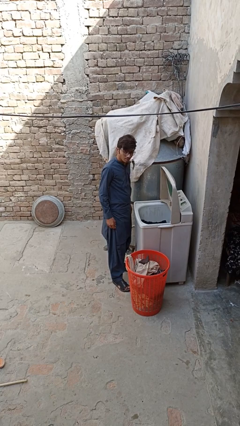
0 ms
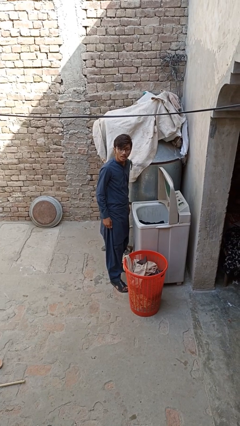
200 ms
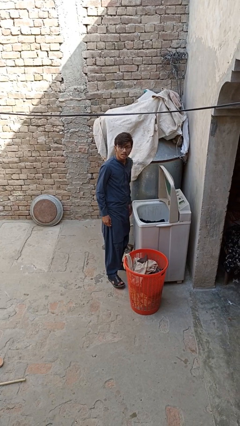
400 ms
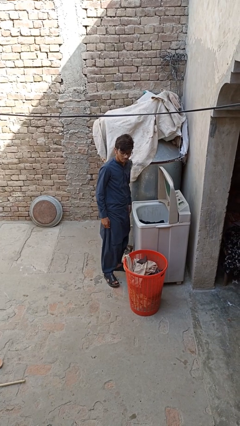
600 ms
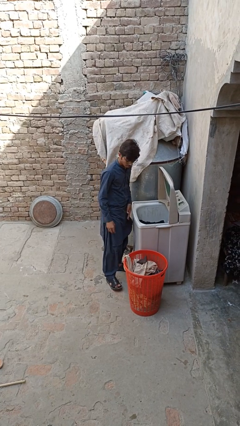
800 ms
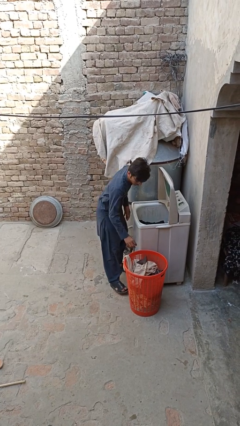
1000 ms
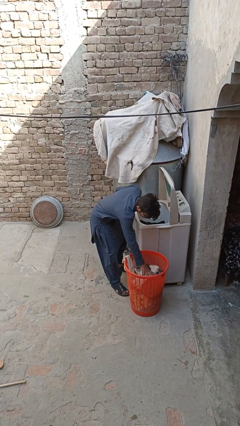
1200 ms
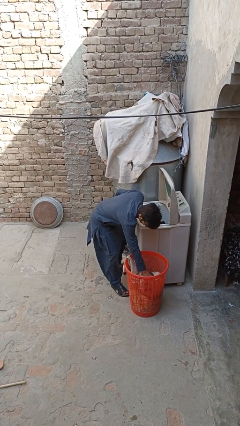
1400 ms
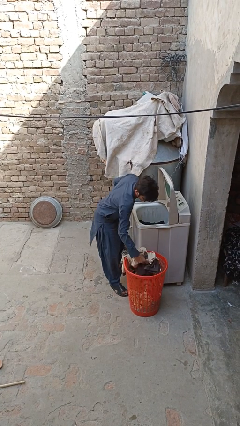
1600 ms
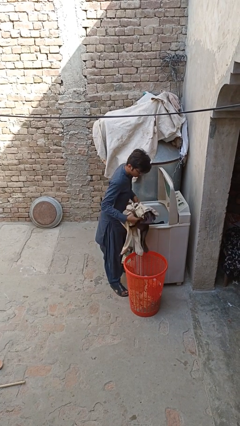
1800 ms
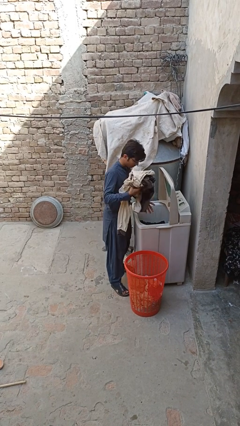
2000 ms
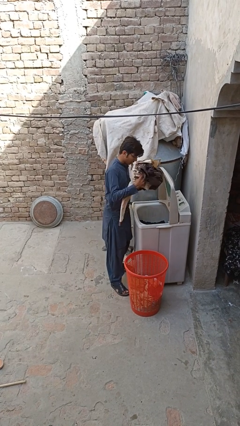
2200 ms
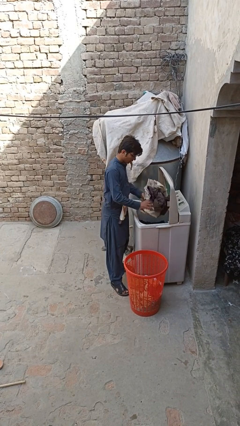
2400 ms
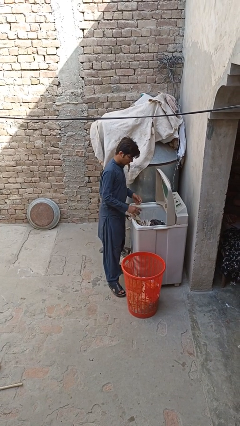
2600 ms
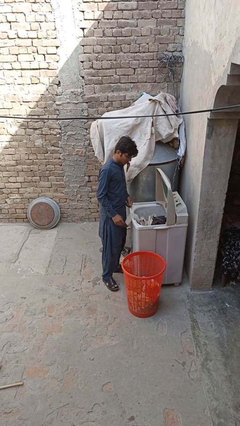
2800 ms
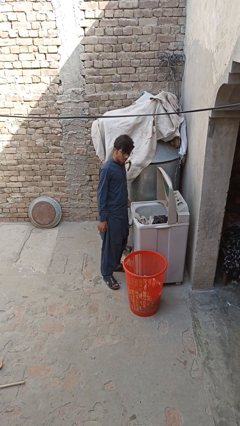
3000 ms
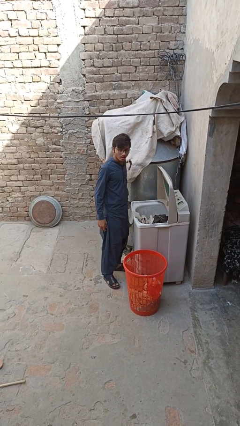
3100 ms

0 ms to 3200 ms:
person loads clotheswasher

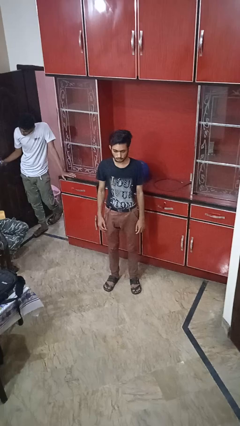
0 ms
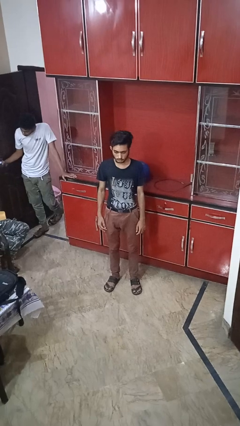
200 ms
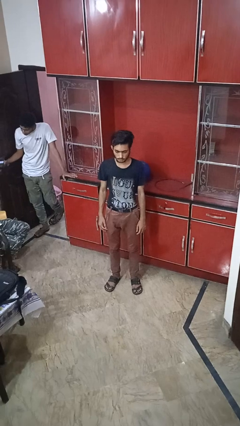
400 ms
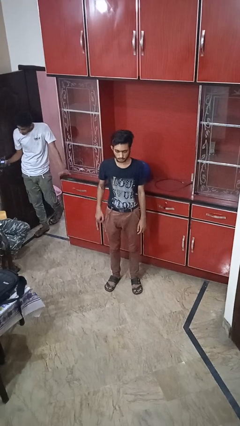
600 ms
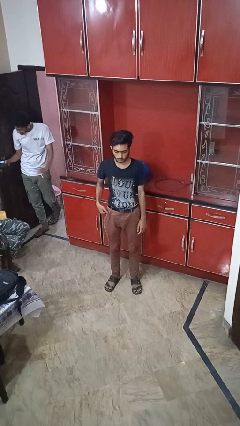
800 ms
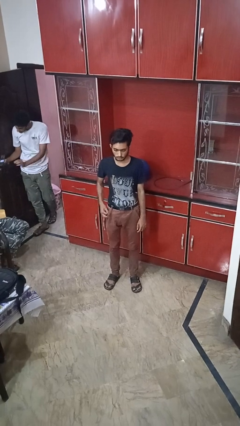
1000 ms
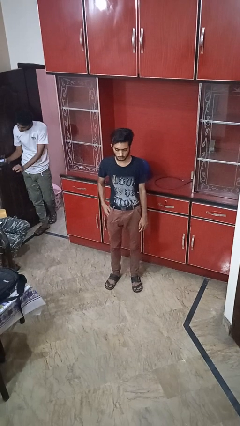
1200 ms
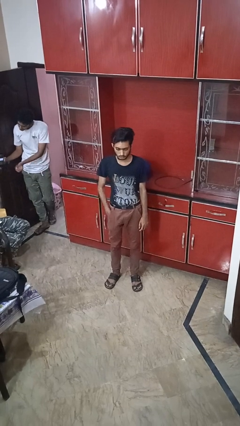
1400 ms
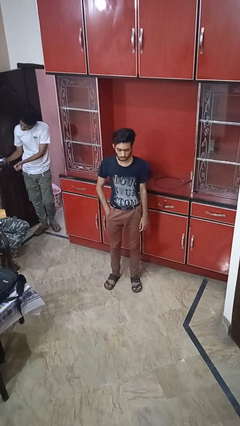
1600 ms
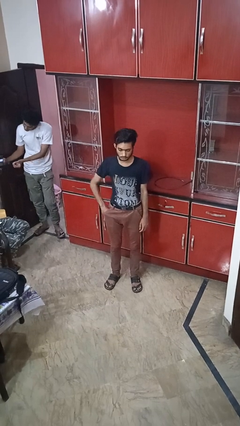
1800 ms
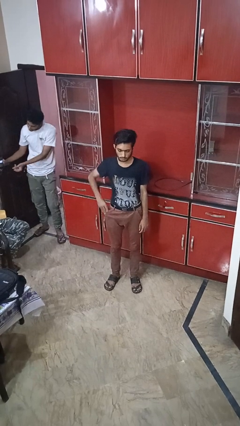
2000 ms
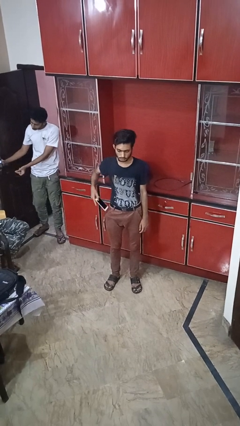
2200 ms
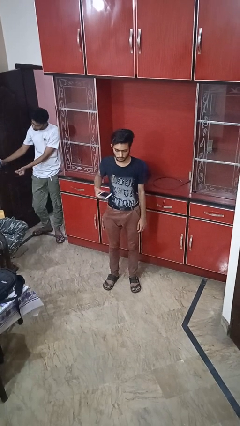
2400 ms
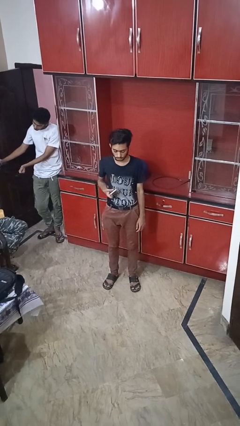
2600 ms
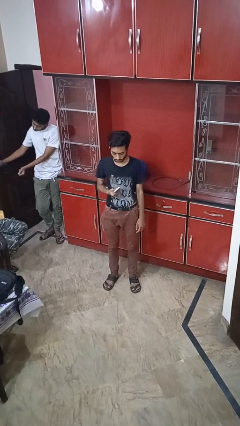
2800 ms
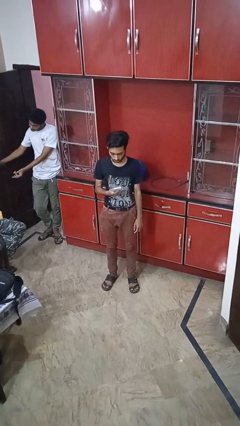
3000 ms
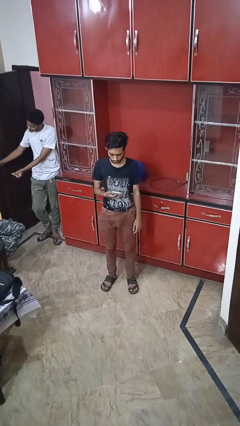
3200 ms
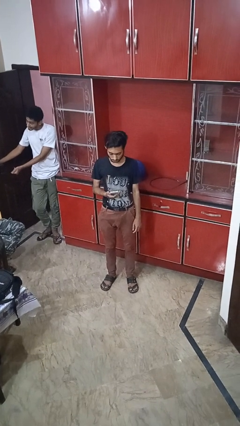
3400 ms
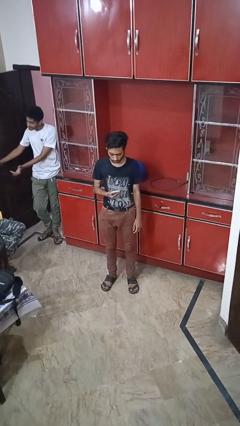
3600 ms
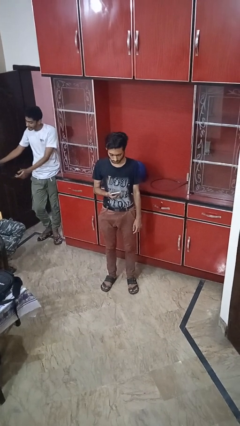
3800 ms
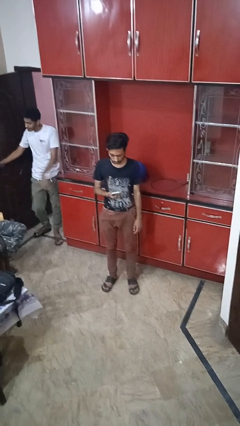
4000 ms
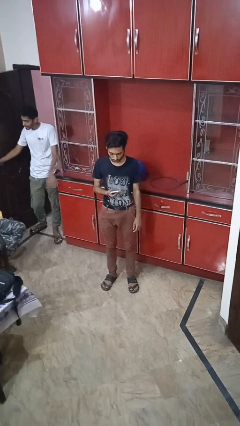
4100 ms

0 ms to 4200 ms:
person takes phone from pocket

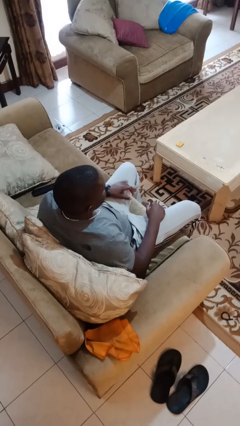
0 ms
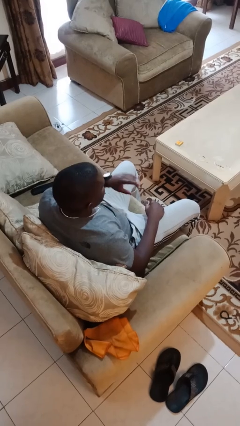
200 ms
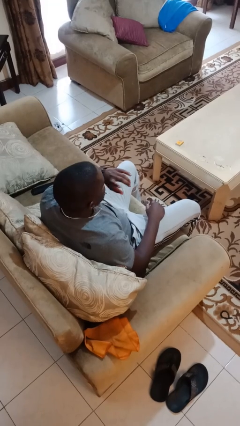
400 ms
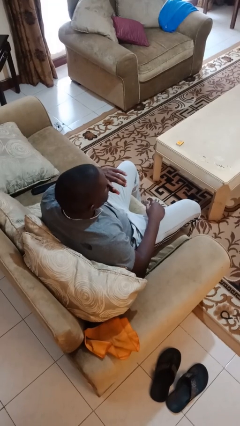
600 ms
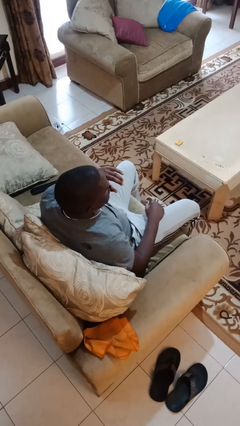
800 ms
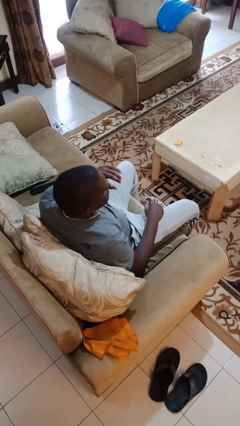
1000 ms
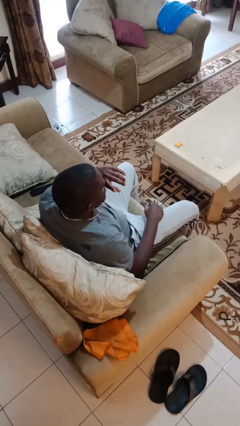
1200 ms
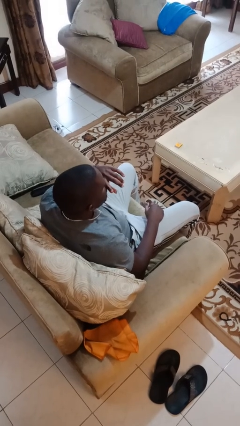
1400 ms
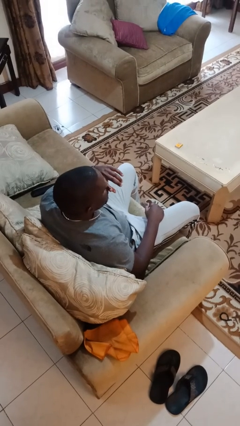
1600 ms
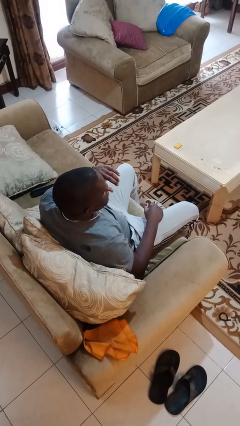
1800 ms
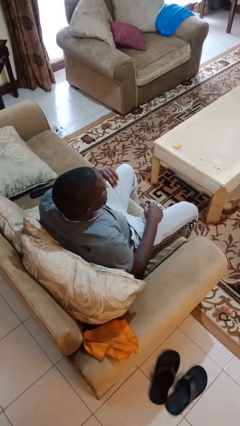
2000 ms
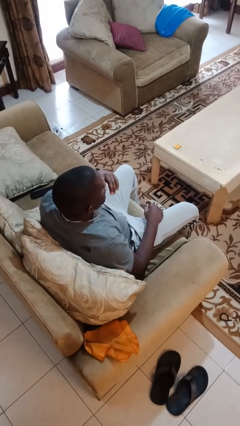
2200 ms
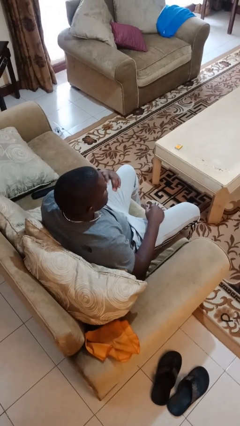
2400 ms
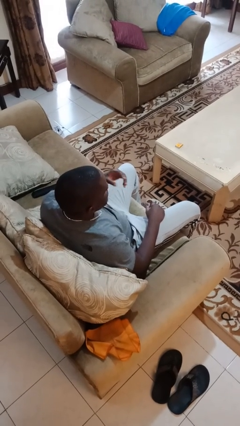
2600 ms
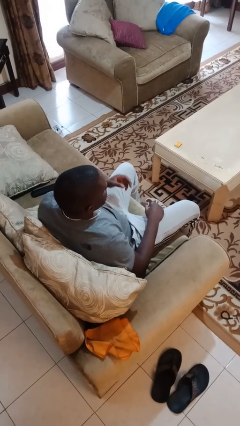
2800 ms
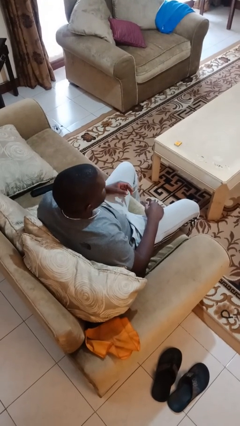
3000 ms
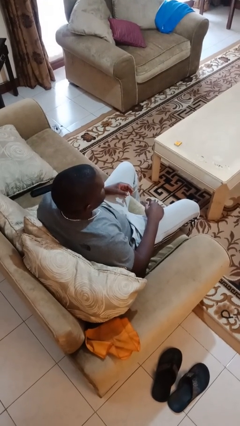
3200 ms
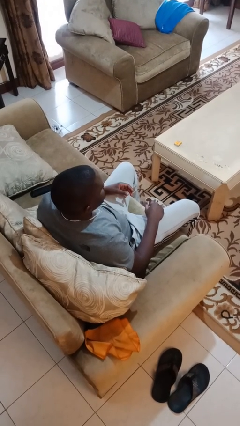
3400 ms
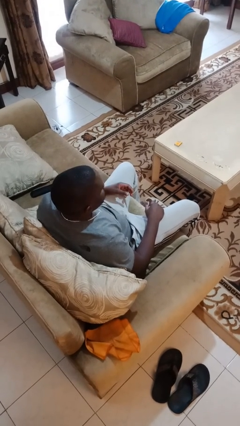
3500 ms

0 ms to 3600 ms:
person licks fingers

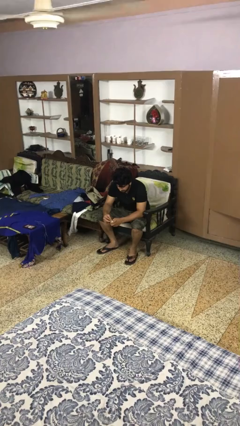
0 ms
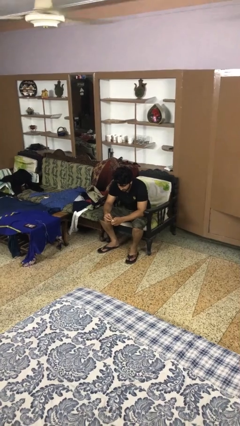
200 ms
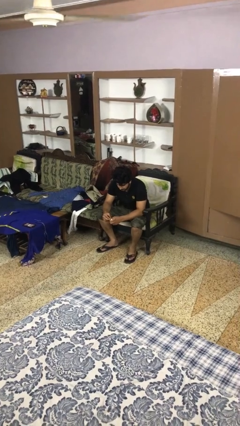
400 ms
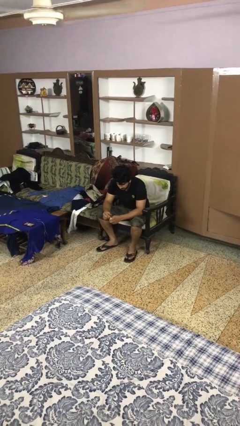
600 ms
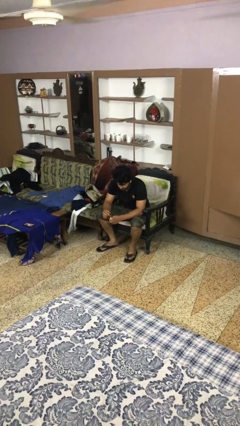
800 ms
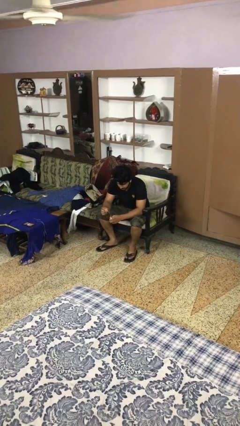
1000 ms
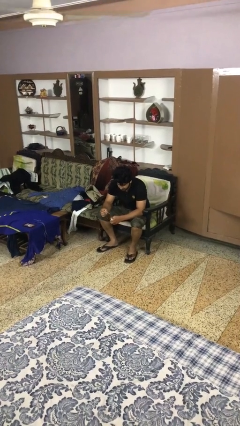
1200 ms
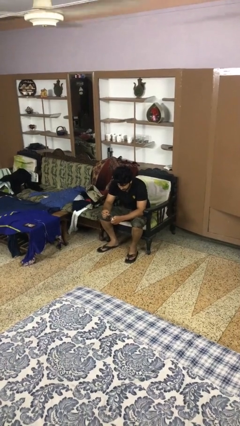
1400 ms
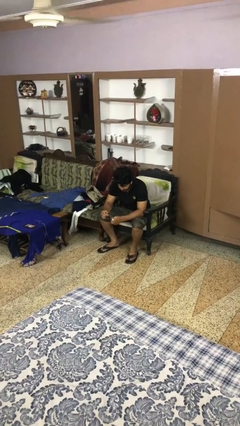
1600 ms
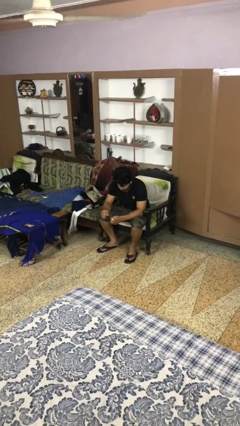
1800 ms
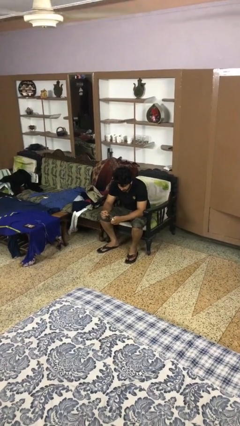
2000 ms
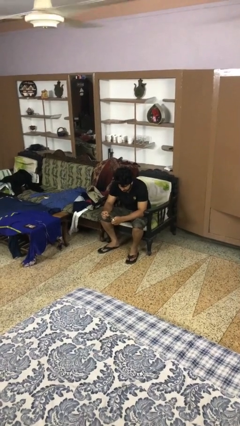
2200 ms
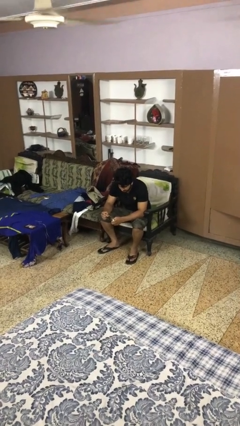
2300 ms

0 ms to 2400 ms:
person paints fingernails

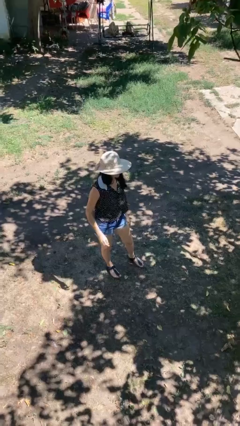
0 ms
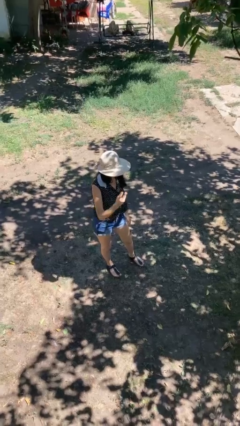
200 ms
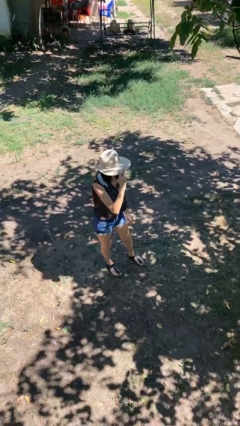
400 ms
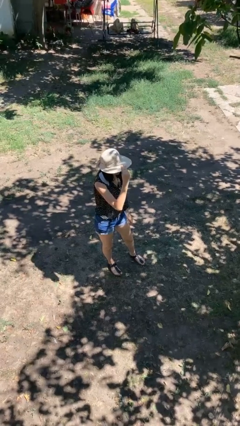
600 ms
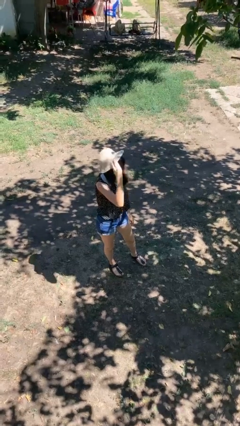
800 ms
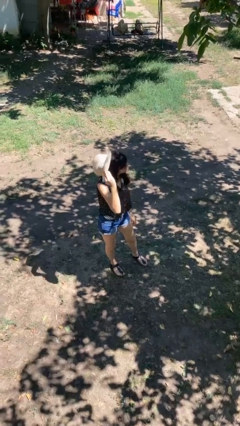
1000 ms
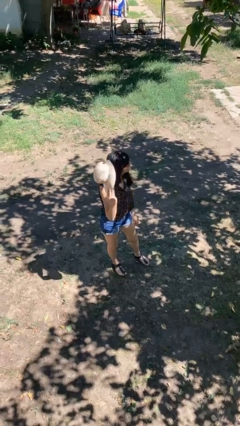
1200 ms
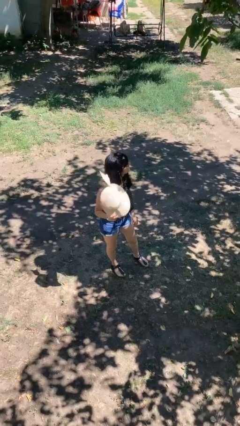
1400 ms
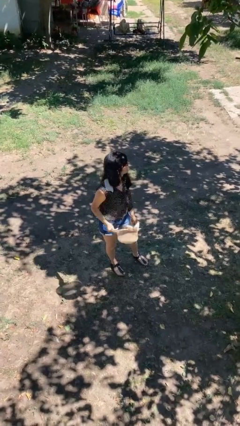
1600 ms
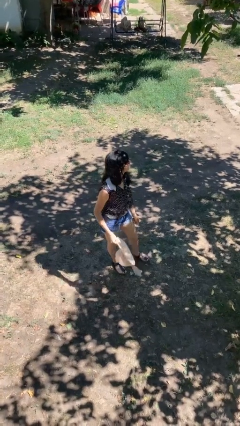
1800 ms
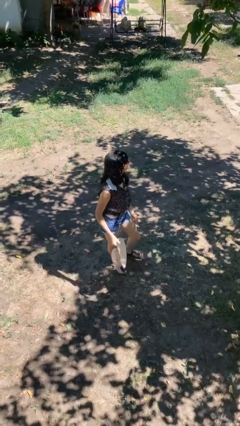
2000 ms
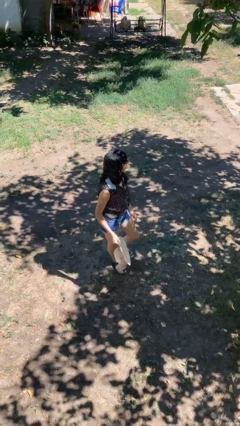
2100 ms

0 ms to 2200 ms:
person takes off hat

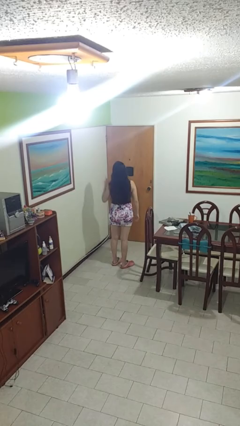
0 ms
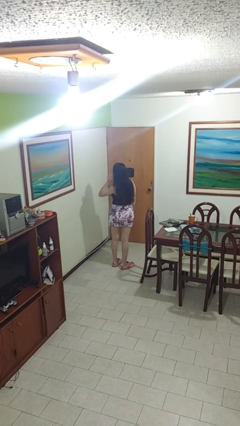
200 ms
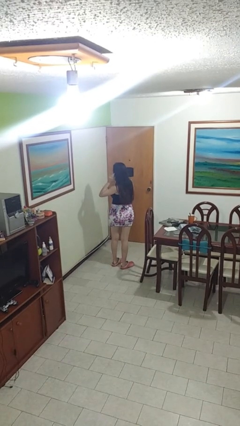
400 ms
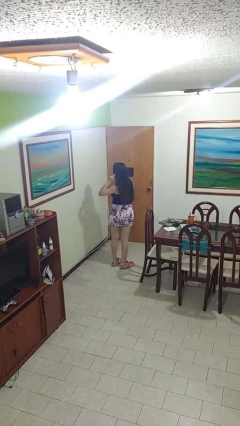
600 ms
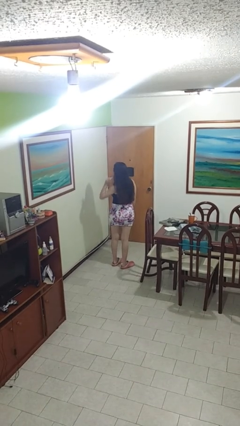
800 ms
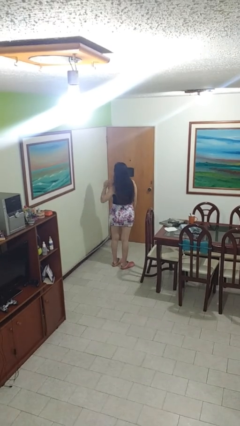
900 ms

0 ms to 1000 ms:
person gestures listen closely

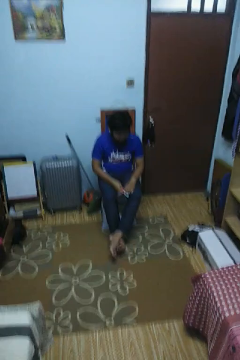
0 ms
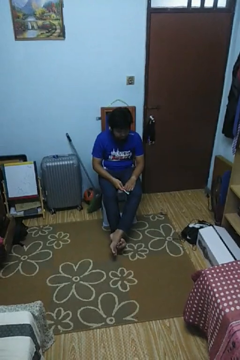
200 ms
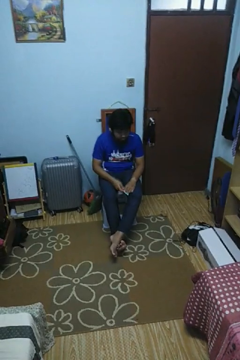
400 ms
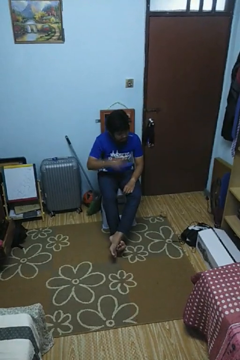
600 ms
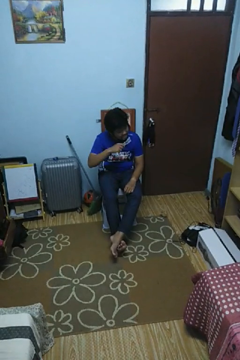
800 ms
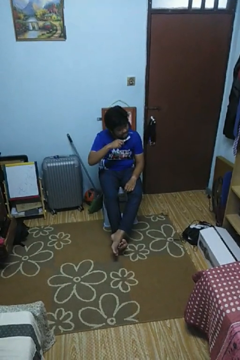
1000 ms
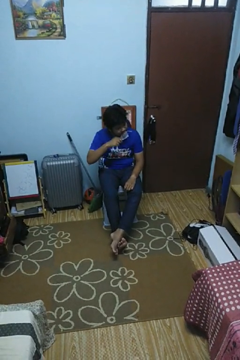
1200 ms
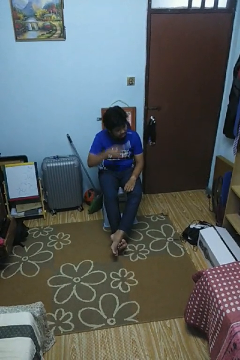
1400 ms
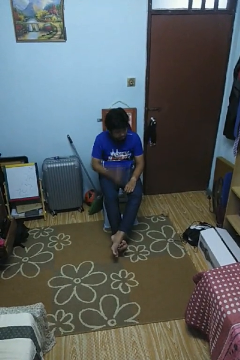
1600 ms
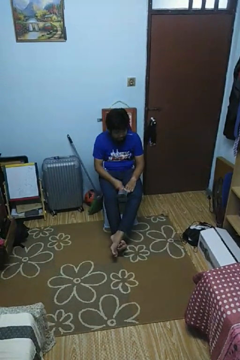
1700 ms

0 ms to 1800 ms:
person brushes teeth
